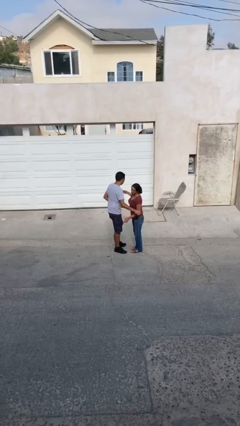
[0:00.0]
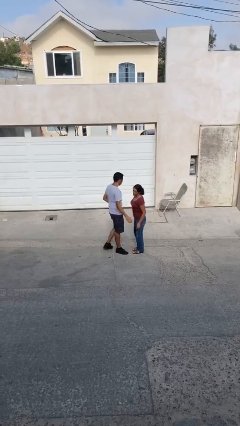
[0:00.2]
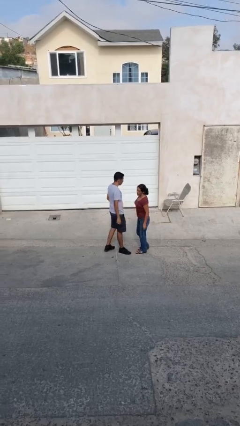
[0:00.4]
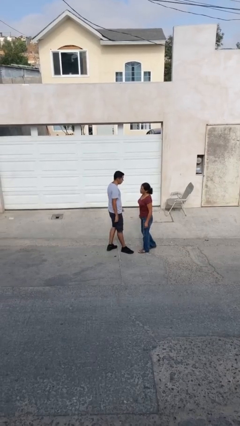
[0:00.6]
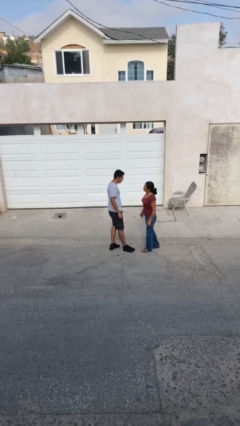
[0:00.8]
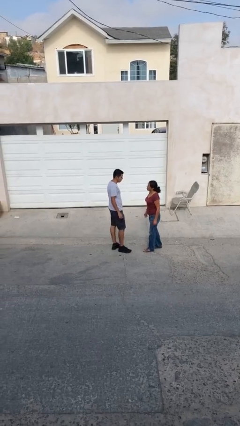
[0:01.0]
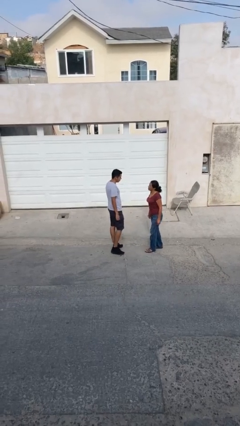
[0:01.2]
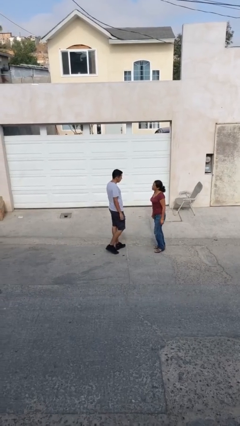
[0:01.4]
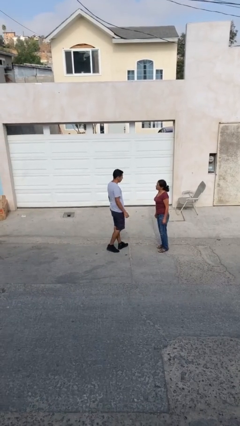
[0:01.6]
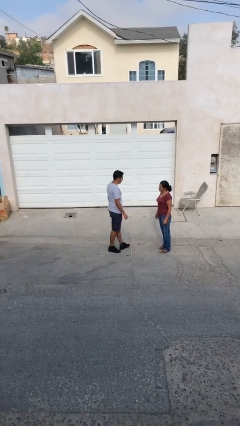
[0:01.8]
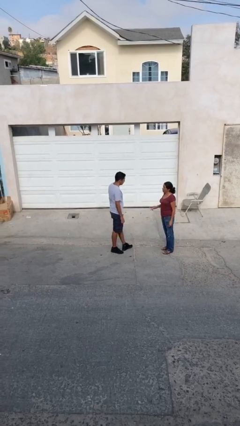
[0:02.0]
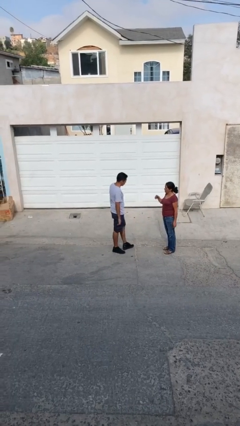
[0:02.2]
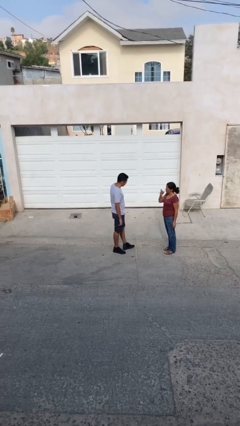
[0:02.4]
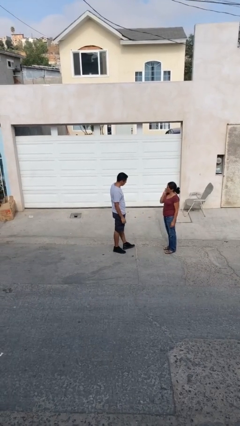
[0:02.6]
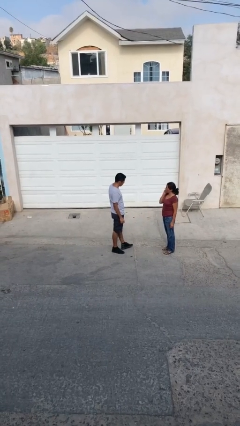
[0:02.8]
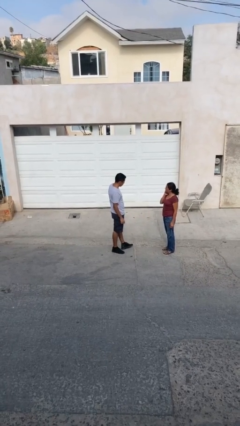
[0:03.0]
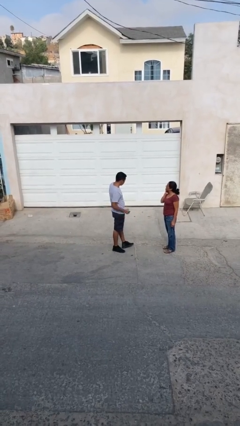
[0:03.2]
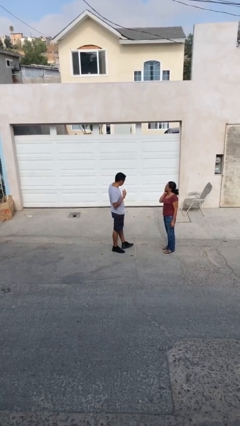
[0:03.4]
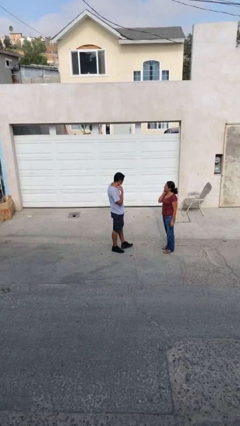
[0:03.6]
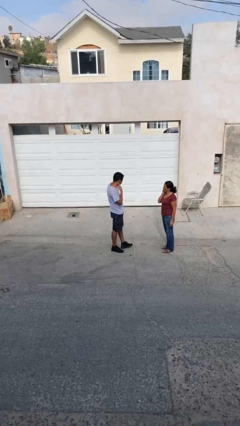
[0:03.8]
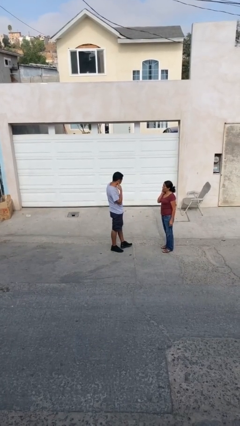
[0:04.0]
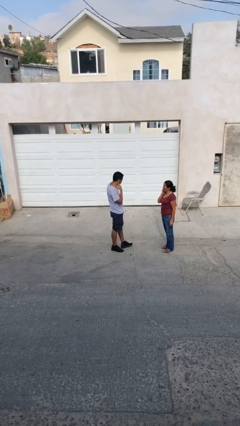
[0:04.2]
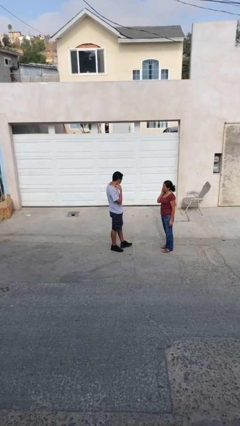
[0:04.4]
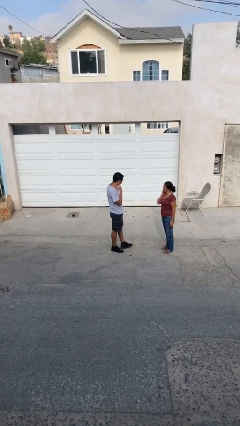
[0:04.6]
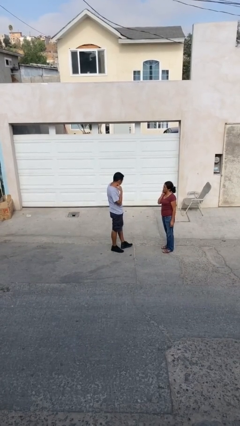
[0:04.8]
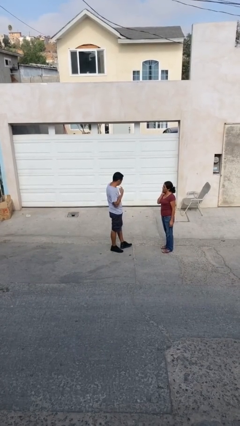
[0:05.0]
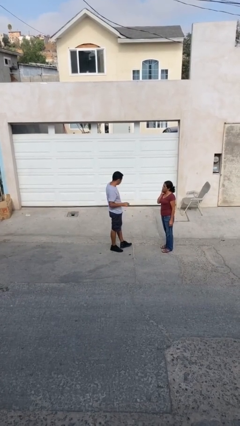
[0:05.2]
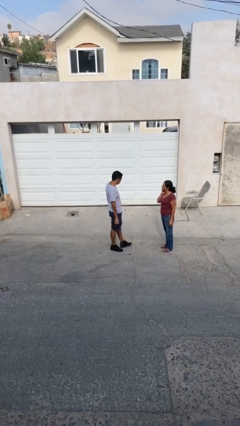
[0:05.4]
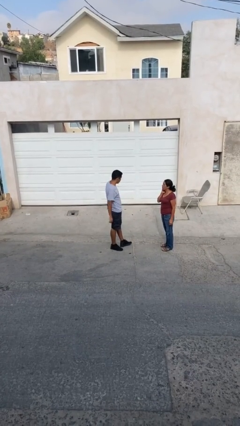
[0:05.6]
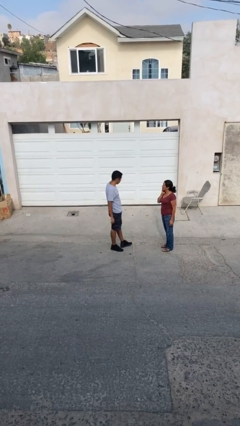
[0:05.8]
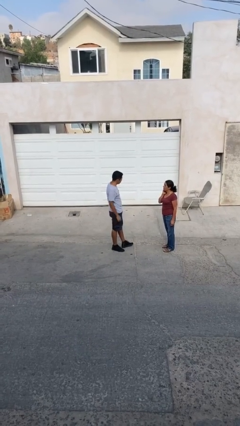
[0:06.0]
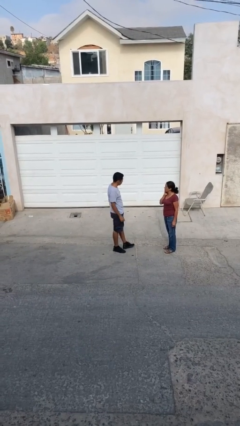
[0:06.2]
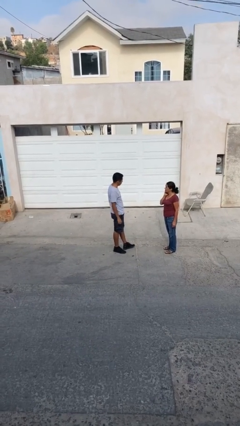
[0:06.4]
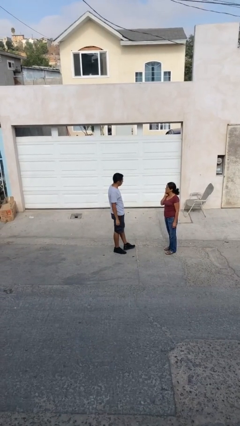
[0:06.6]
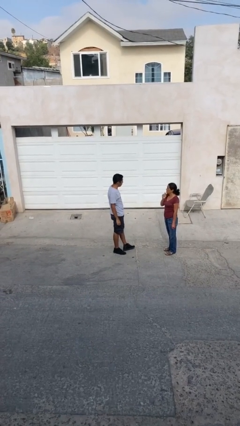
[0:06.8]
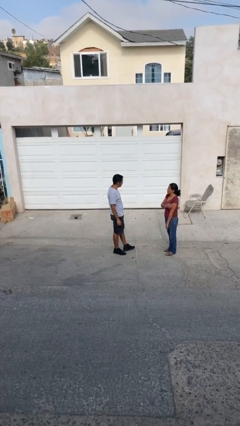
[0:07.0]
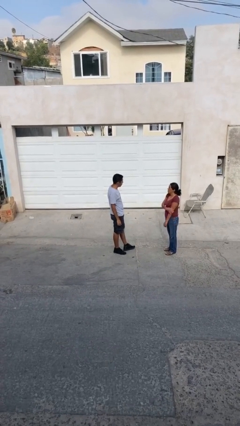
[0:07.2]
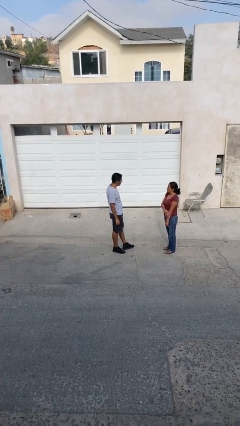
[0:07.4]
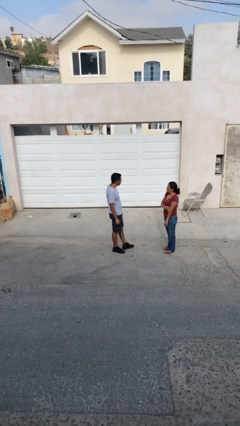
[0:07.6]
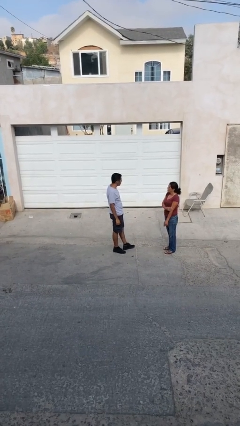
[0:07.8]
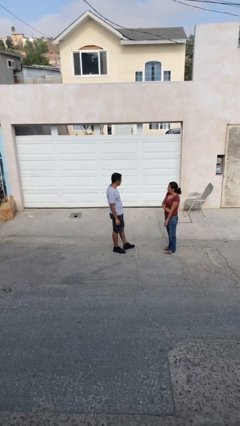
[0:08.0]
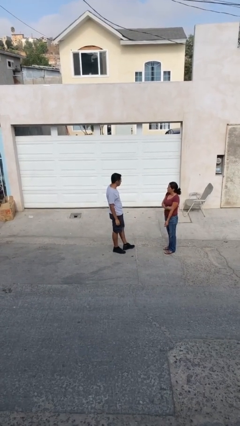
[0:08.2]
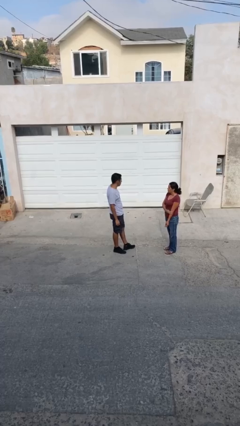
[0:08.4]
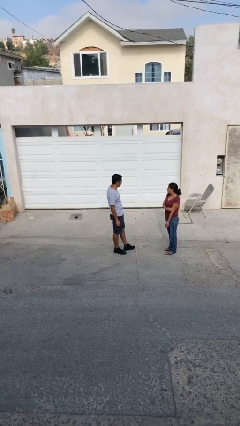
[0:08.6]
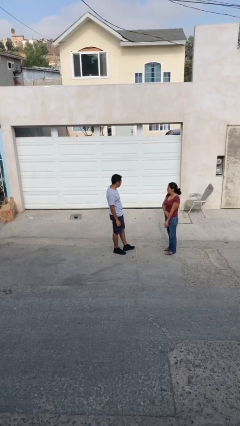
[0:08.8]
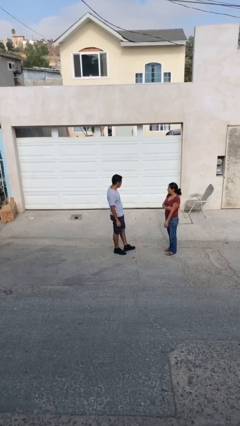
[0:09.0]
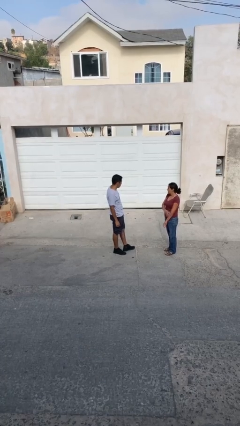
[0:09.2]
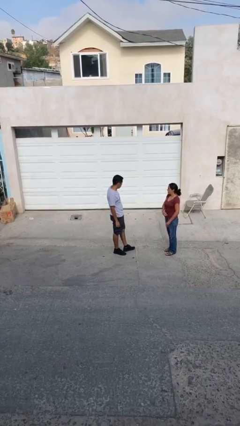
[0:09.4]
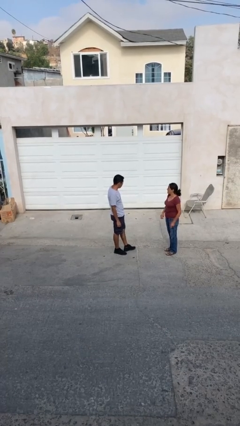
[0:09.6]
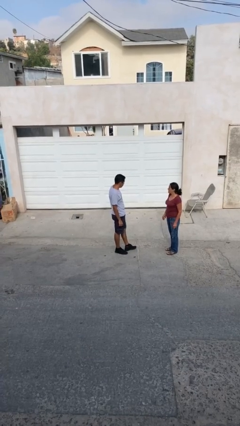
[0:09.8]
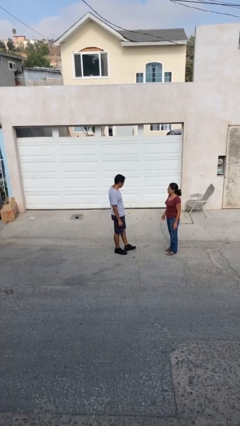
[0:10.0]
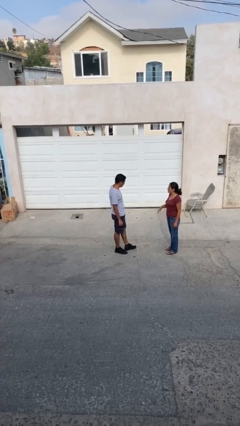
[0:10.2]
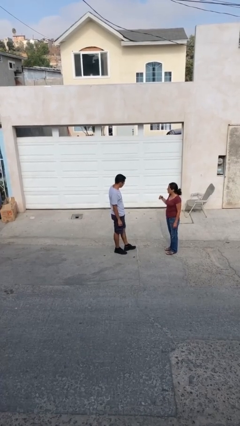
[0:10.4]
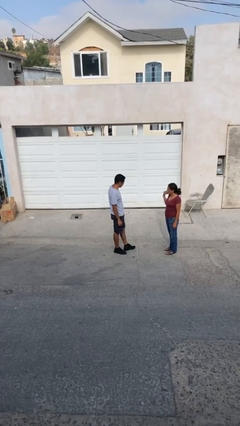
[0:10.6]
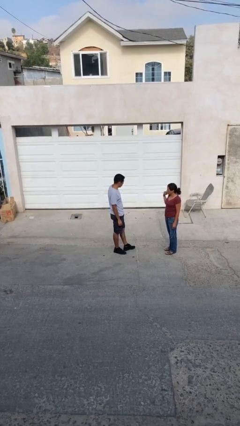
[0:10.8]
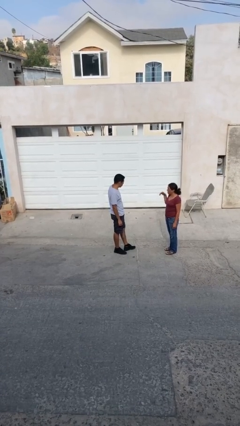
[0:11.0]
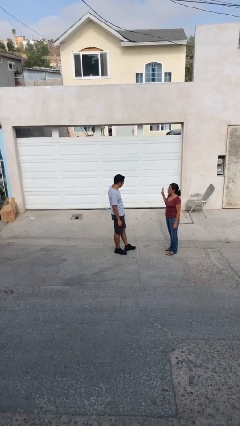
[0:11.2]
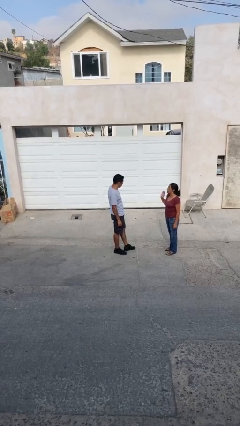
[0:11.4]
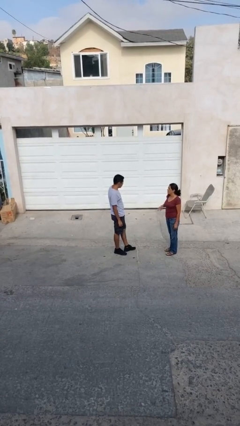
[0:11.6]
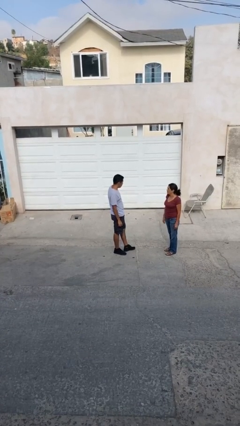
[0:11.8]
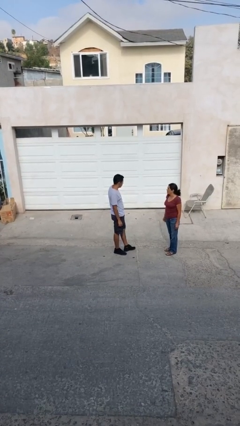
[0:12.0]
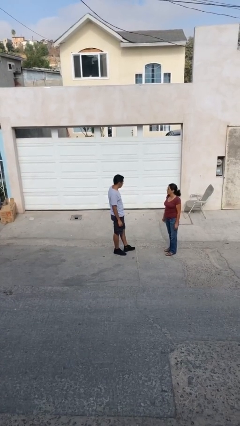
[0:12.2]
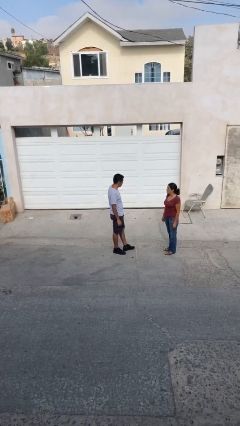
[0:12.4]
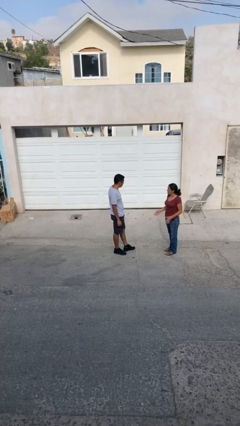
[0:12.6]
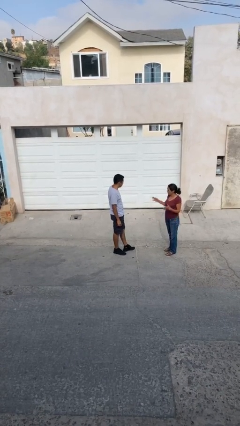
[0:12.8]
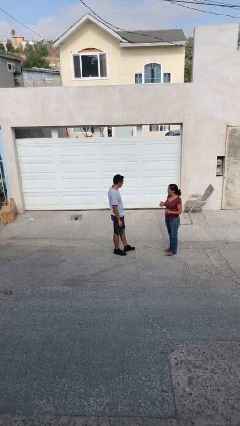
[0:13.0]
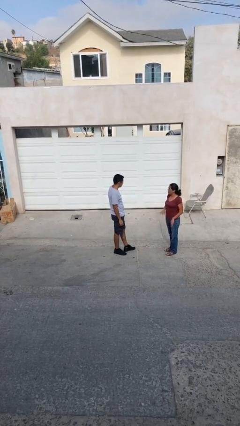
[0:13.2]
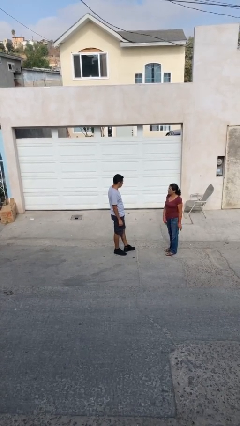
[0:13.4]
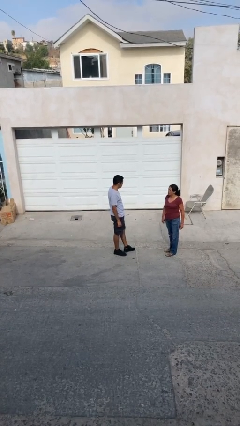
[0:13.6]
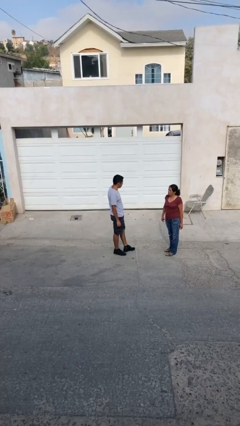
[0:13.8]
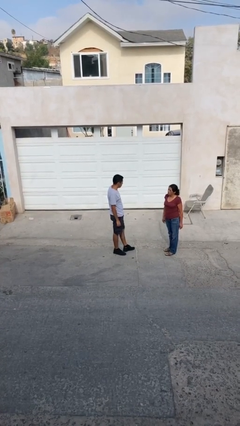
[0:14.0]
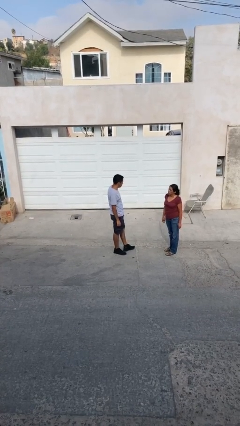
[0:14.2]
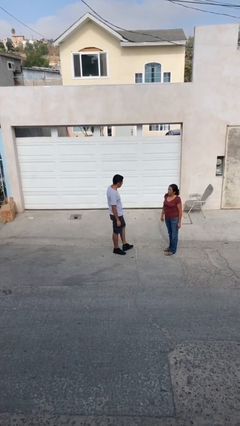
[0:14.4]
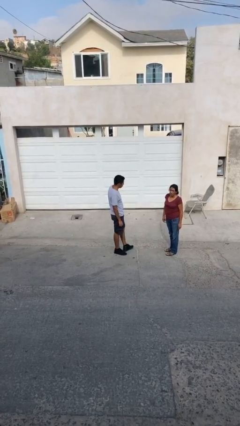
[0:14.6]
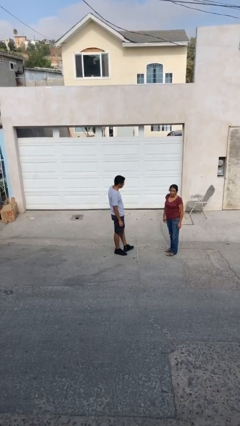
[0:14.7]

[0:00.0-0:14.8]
person talks to person

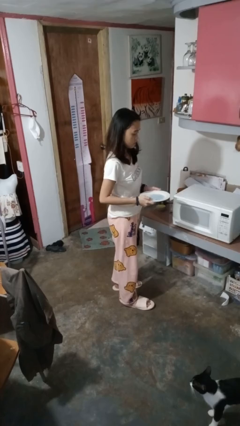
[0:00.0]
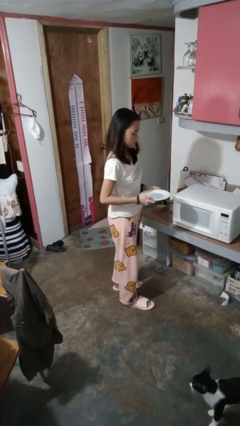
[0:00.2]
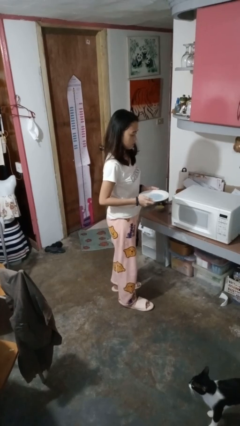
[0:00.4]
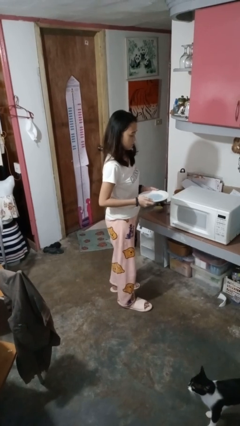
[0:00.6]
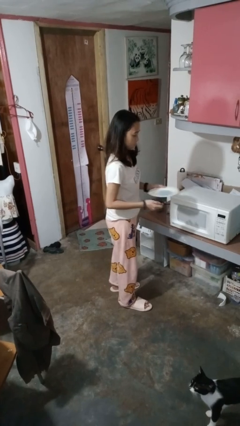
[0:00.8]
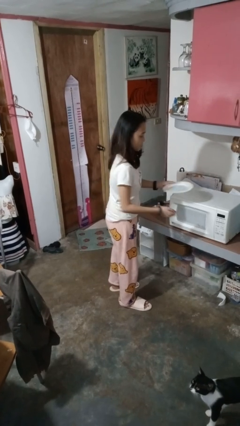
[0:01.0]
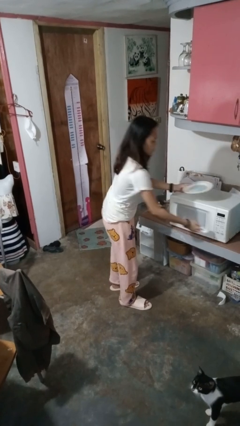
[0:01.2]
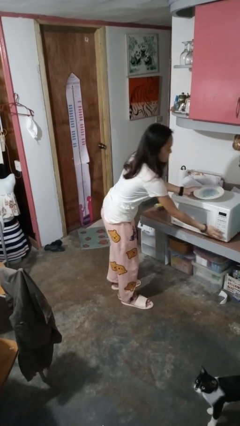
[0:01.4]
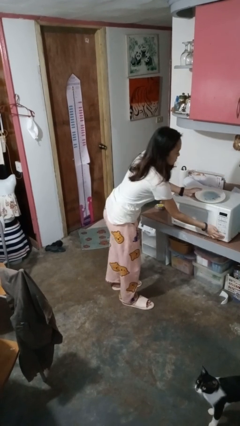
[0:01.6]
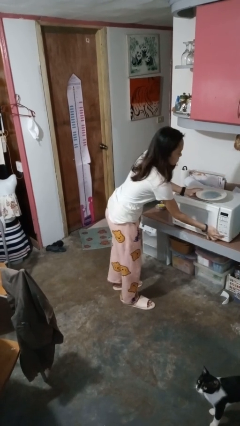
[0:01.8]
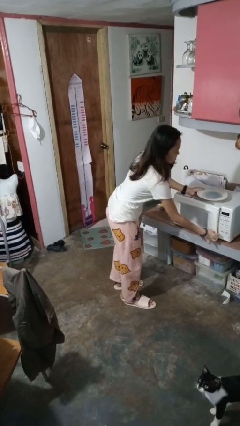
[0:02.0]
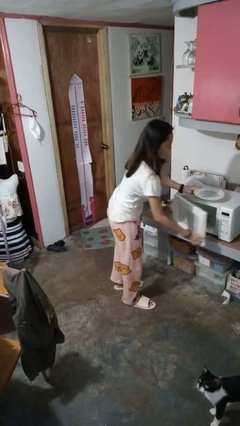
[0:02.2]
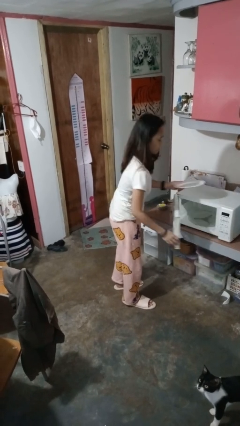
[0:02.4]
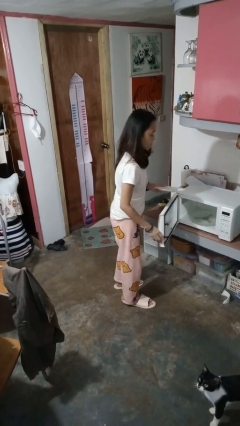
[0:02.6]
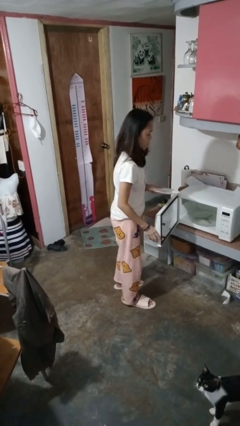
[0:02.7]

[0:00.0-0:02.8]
person opens microwave

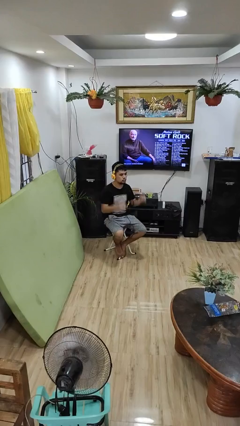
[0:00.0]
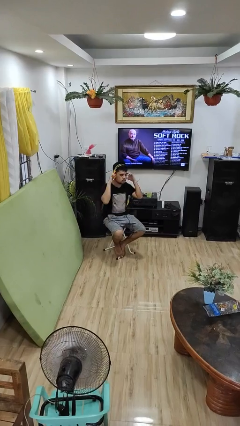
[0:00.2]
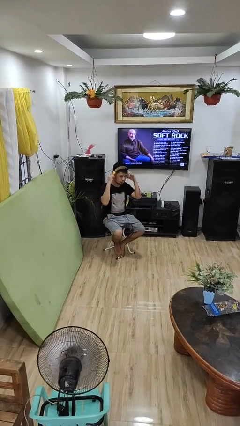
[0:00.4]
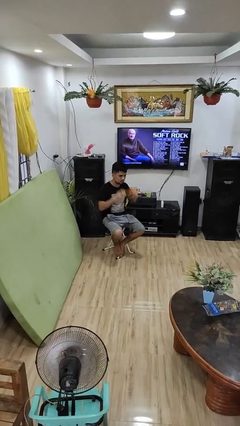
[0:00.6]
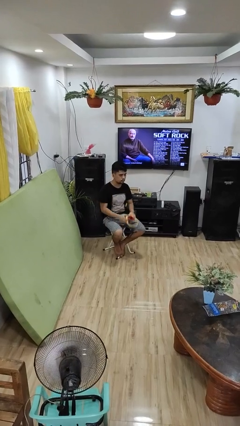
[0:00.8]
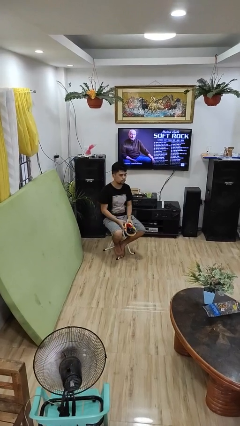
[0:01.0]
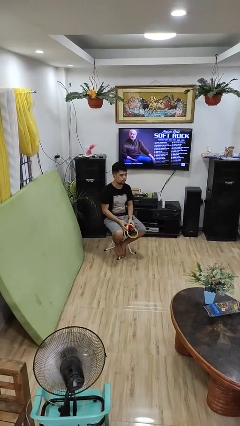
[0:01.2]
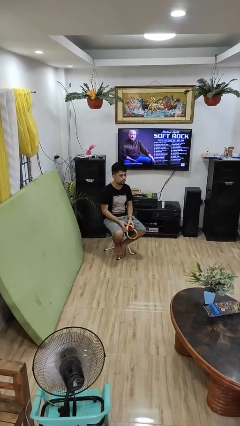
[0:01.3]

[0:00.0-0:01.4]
person takes off headphones
